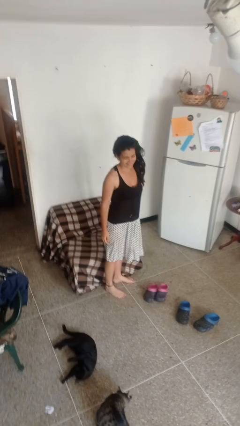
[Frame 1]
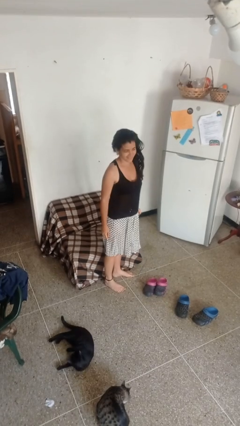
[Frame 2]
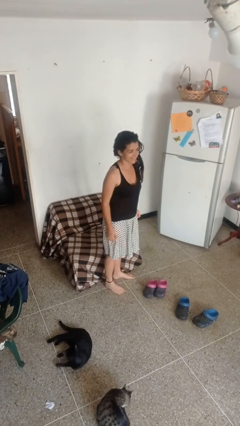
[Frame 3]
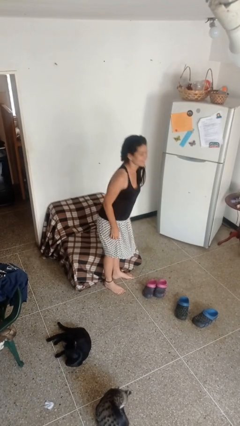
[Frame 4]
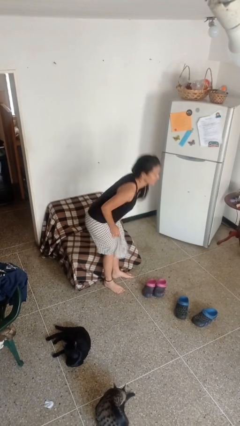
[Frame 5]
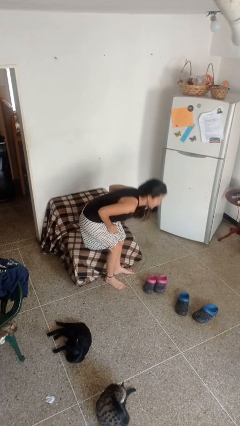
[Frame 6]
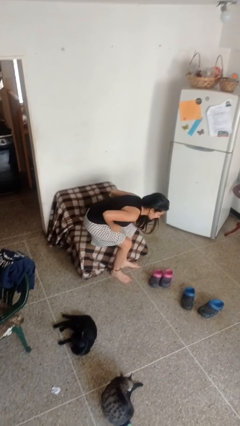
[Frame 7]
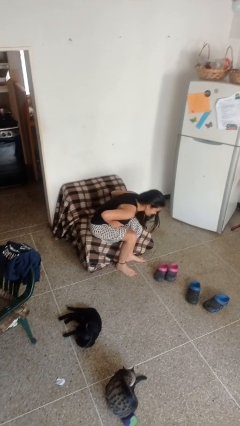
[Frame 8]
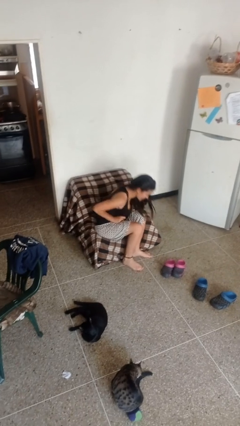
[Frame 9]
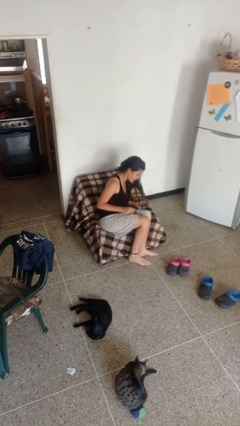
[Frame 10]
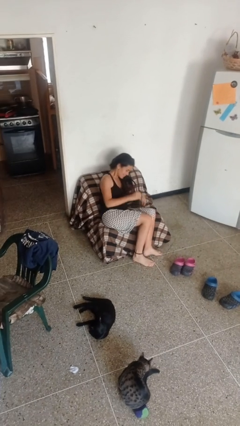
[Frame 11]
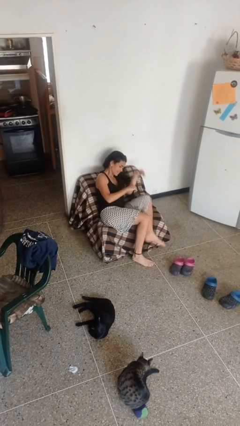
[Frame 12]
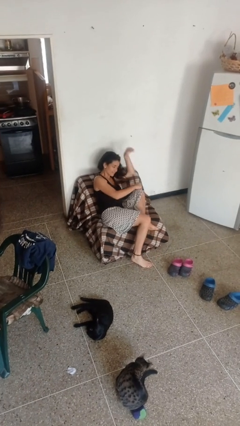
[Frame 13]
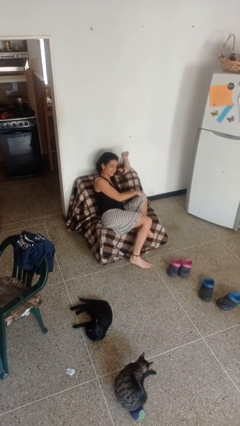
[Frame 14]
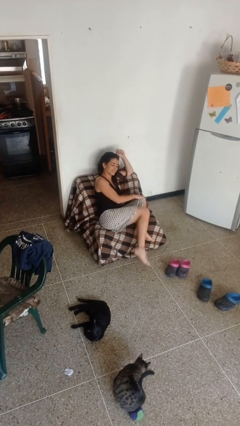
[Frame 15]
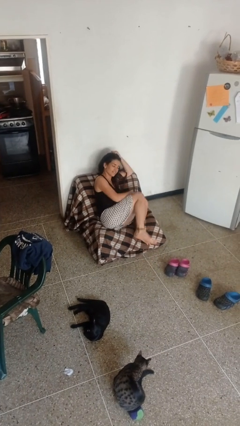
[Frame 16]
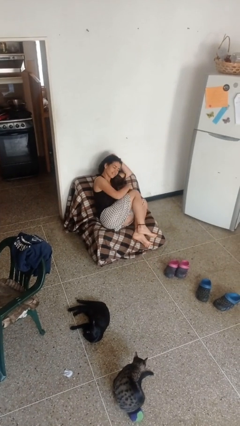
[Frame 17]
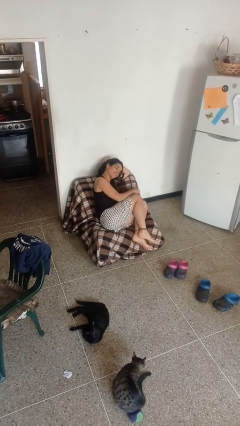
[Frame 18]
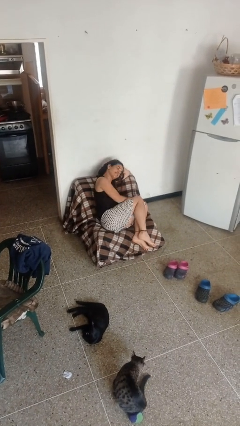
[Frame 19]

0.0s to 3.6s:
person lies down on couch

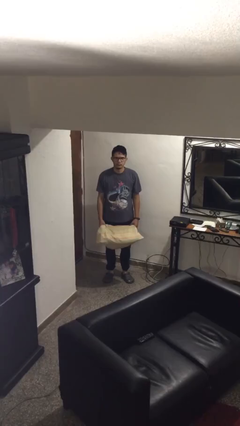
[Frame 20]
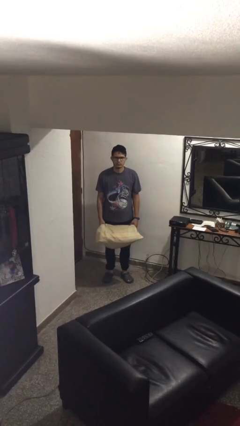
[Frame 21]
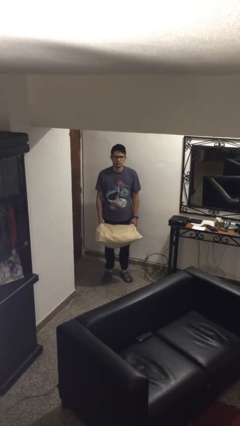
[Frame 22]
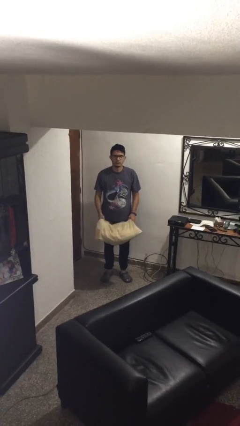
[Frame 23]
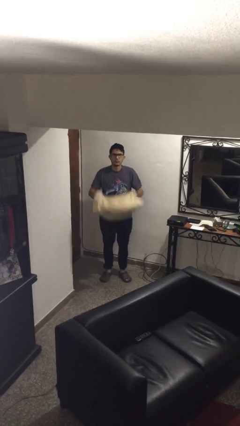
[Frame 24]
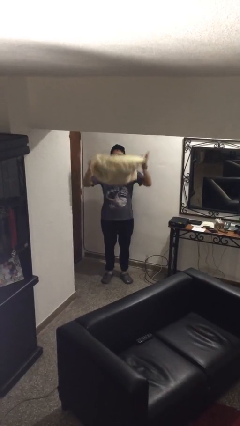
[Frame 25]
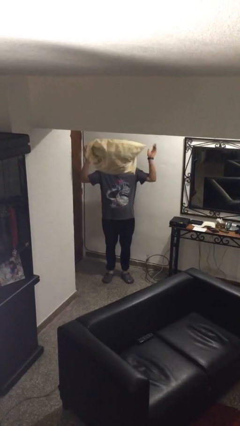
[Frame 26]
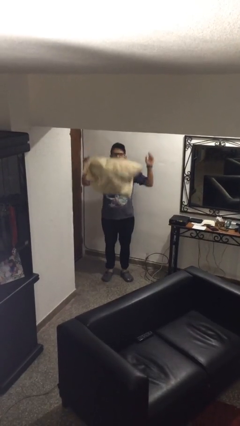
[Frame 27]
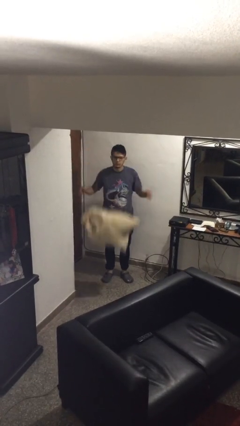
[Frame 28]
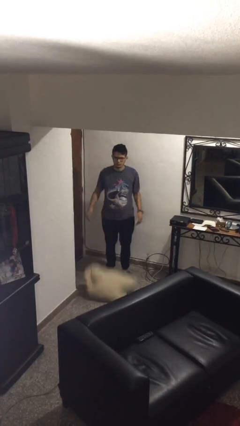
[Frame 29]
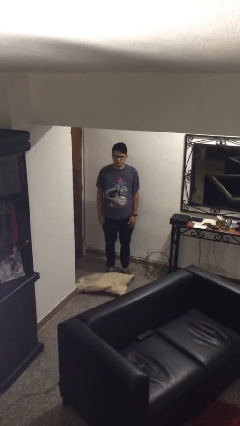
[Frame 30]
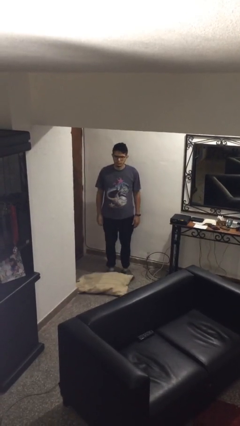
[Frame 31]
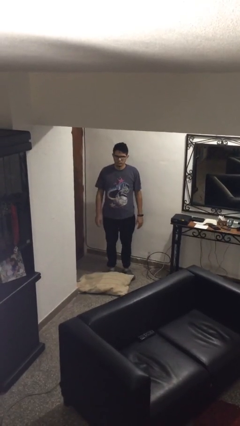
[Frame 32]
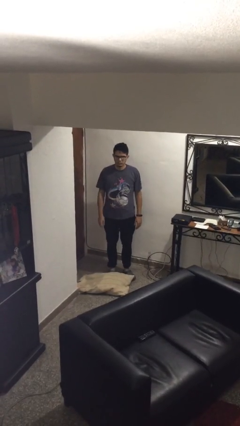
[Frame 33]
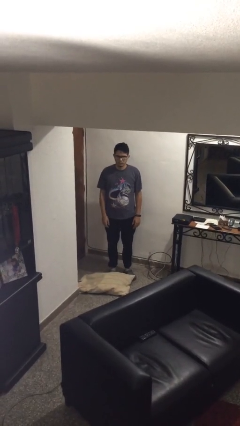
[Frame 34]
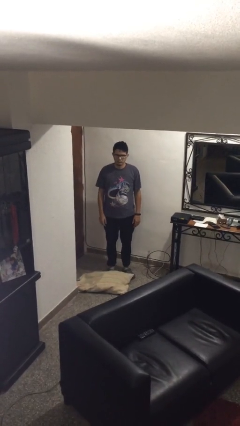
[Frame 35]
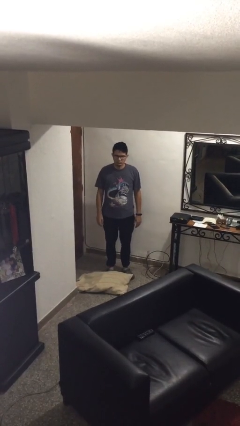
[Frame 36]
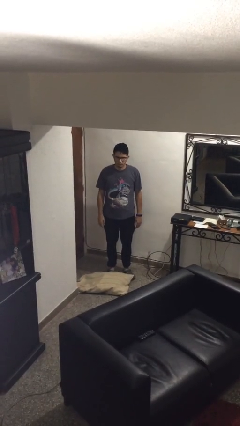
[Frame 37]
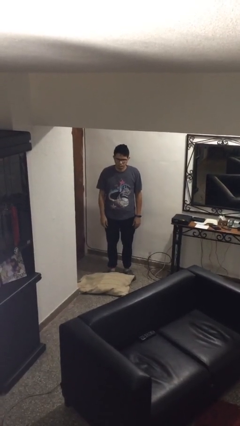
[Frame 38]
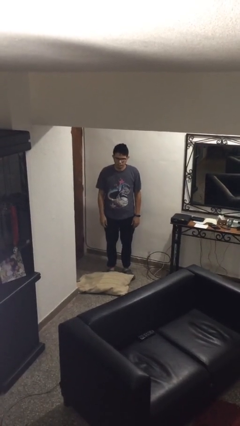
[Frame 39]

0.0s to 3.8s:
person throws object into air

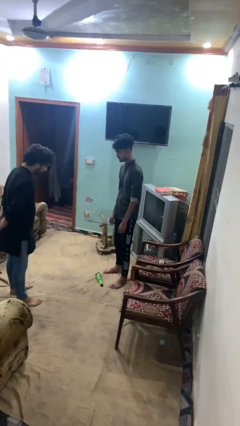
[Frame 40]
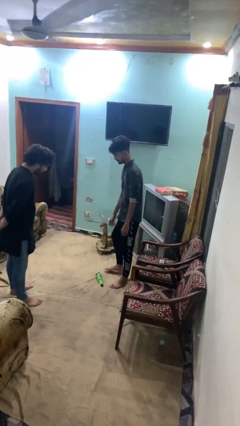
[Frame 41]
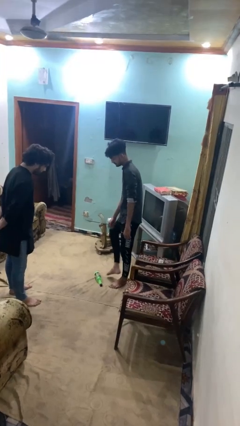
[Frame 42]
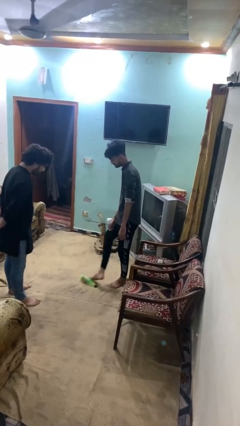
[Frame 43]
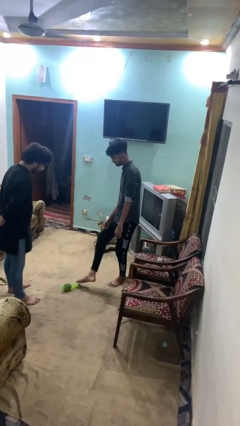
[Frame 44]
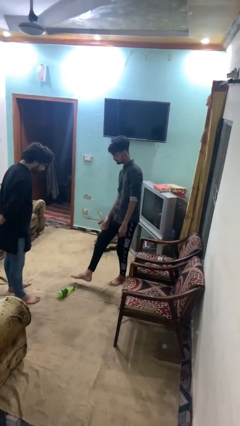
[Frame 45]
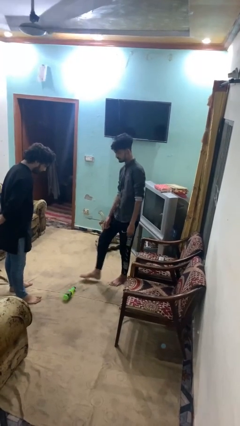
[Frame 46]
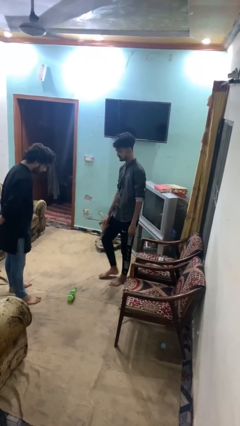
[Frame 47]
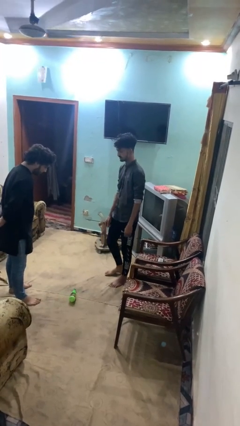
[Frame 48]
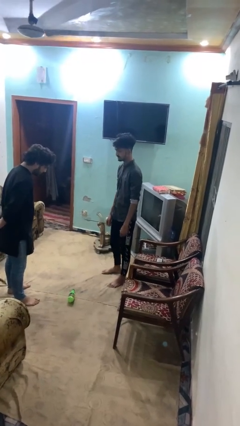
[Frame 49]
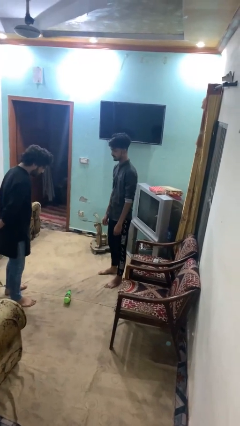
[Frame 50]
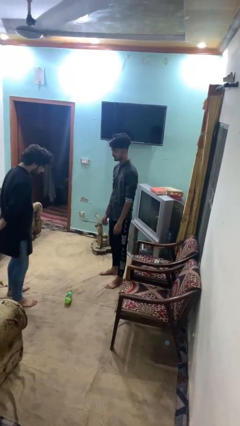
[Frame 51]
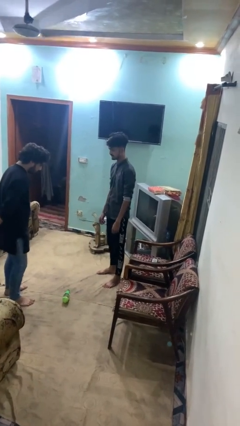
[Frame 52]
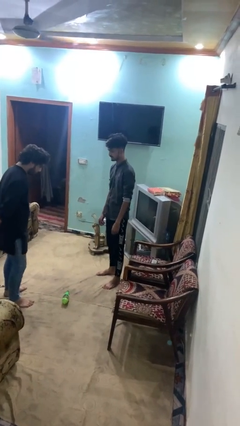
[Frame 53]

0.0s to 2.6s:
person kicks object to person

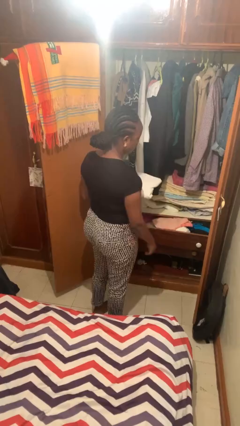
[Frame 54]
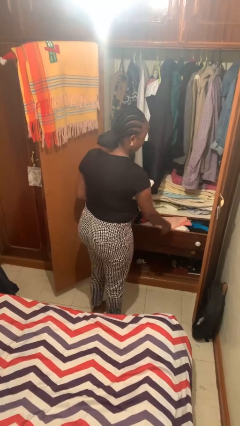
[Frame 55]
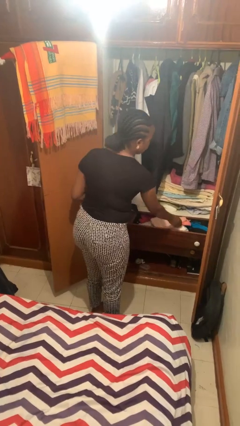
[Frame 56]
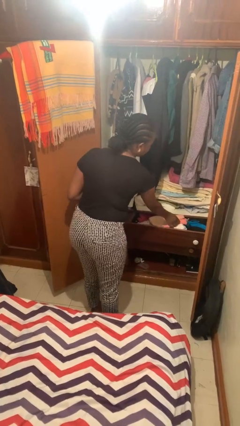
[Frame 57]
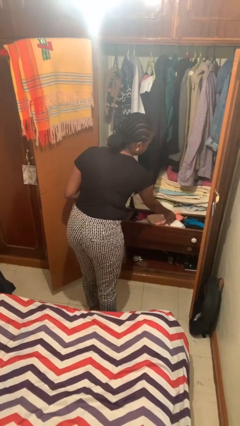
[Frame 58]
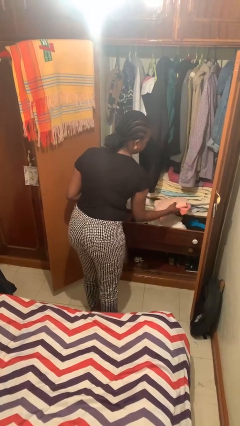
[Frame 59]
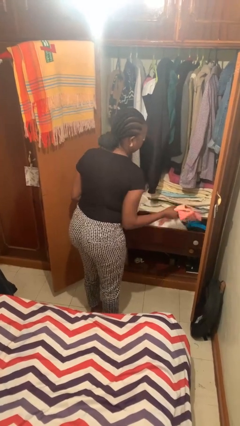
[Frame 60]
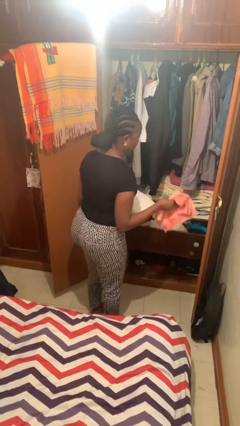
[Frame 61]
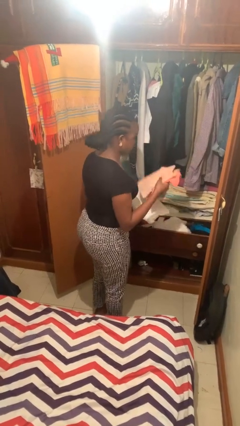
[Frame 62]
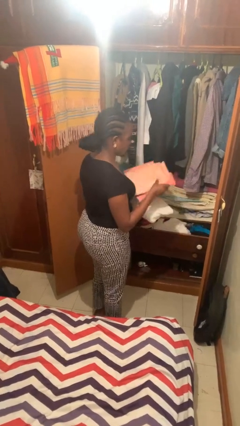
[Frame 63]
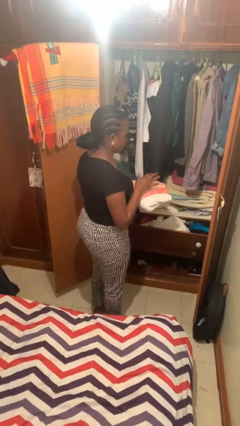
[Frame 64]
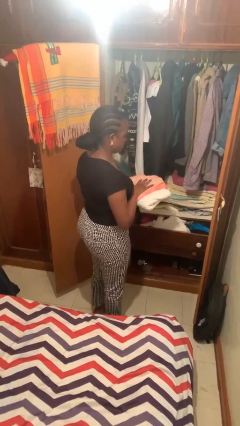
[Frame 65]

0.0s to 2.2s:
person takes clothes from dresser

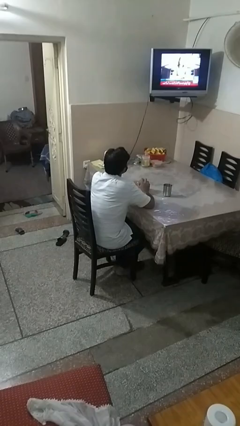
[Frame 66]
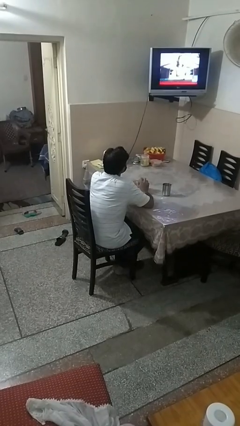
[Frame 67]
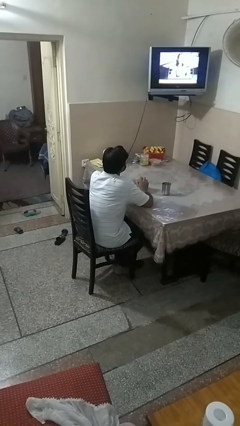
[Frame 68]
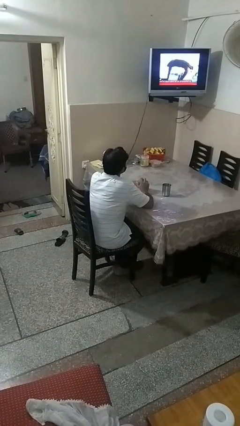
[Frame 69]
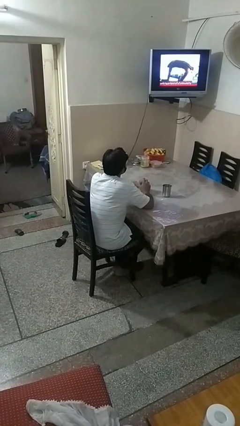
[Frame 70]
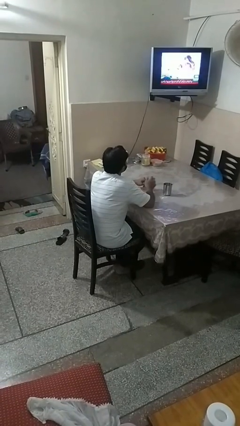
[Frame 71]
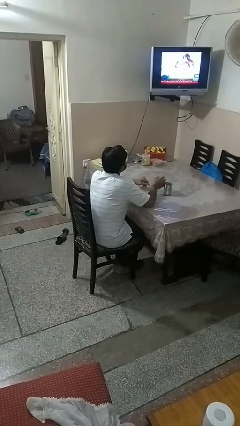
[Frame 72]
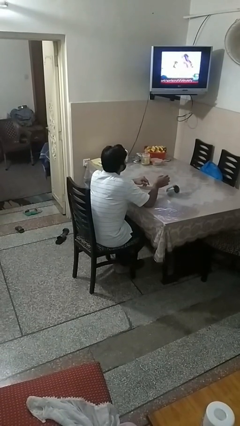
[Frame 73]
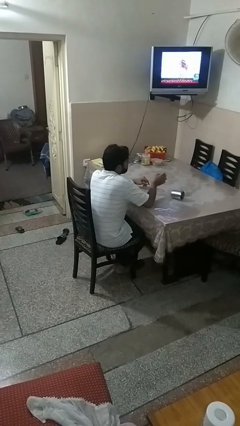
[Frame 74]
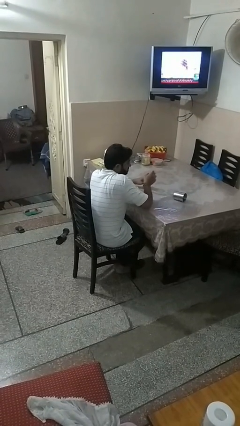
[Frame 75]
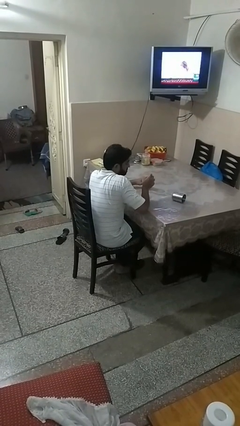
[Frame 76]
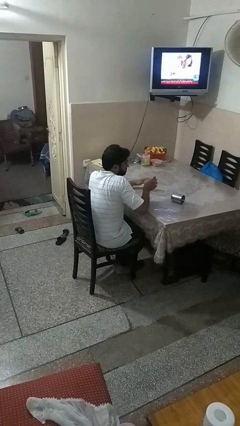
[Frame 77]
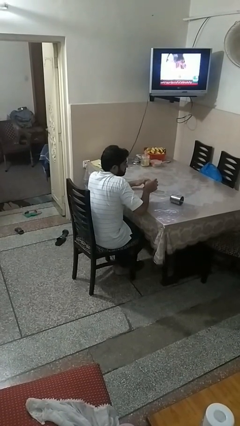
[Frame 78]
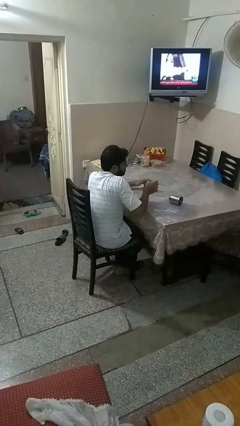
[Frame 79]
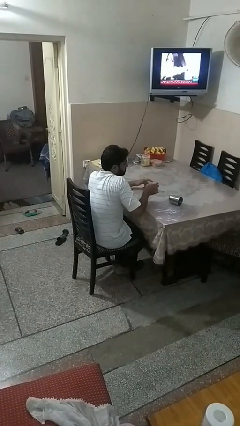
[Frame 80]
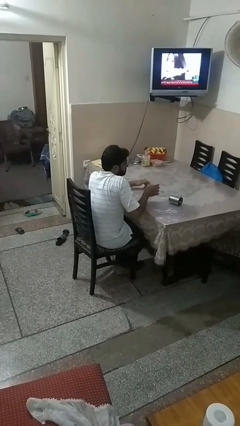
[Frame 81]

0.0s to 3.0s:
person knocks over glass

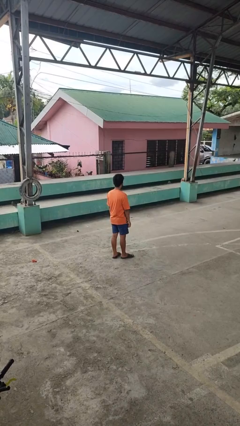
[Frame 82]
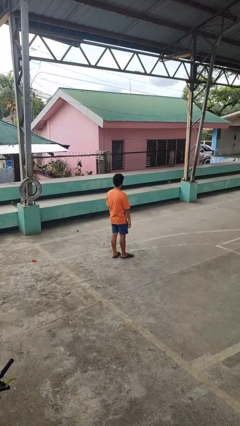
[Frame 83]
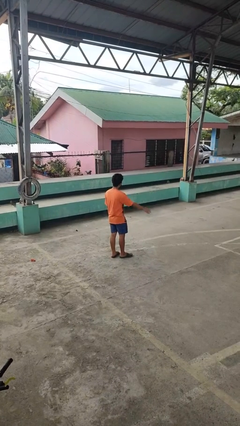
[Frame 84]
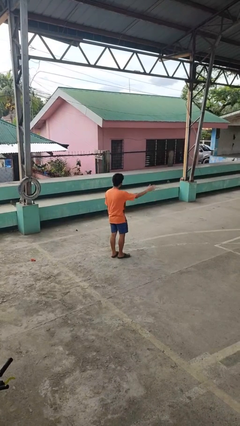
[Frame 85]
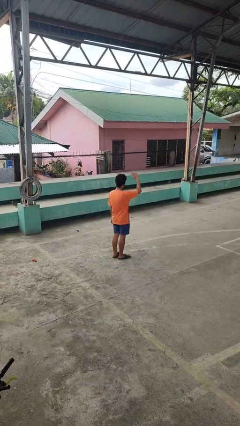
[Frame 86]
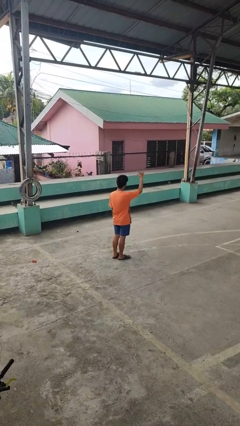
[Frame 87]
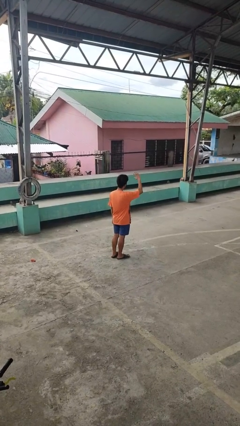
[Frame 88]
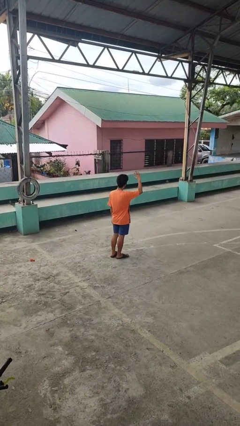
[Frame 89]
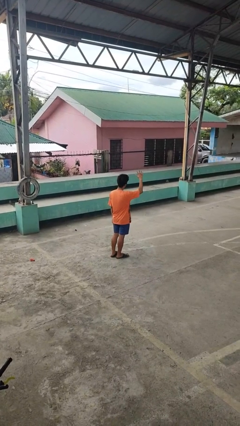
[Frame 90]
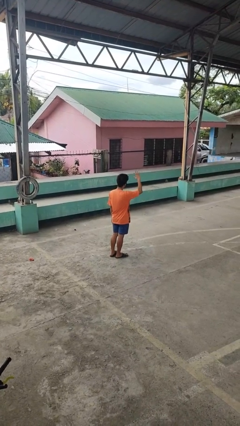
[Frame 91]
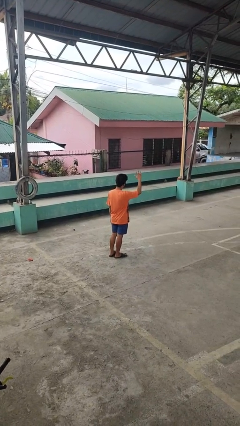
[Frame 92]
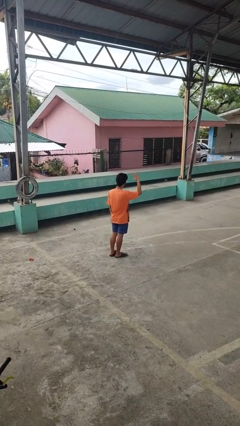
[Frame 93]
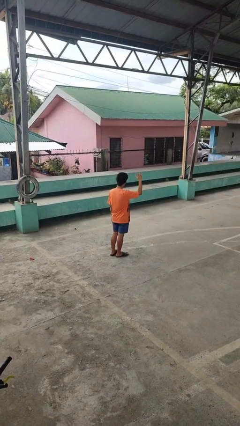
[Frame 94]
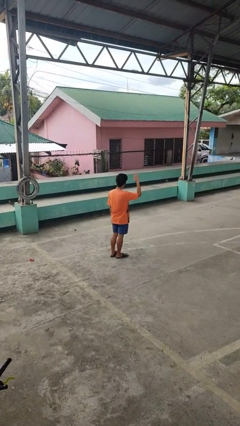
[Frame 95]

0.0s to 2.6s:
person waves at person
